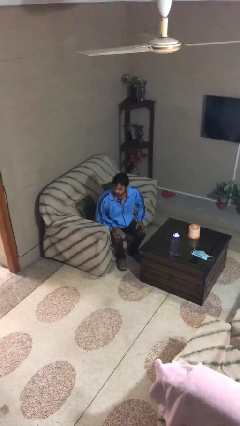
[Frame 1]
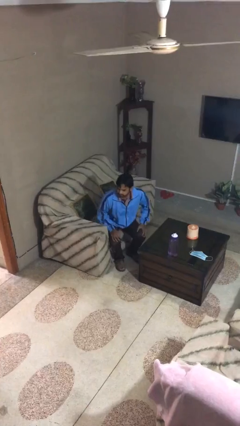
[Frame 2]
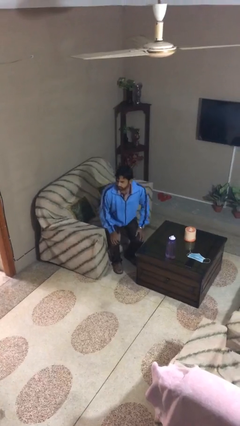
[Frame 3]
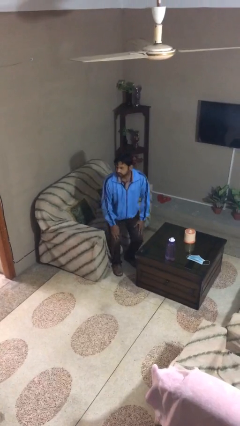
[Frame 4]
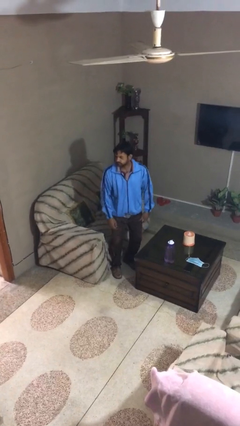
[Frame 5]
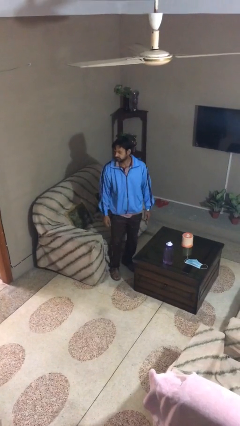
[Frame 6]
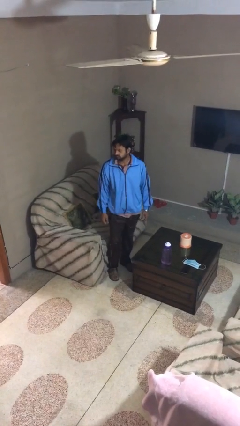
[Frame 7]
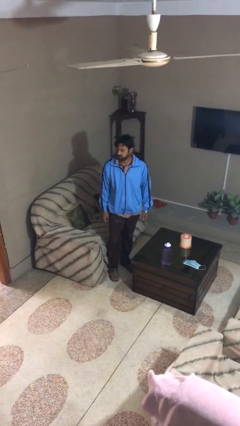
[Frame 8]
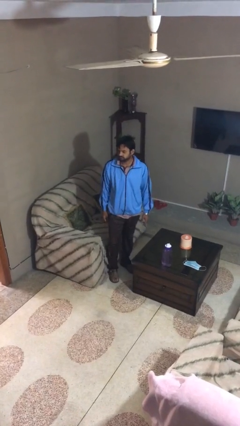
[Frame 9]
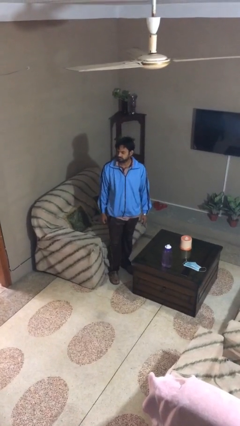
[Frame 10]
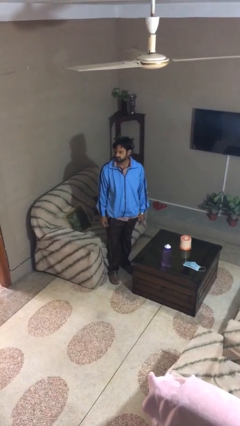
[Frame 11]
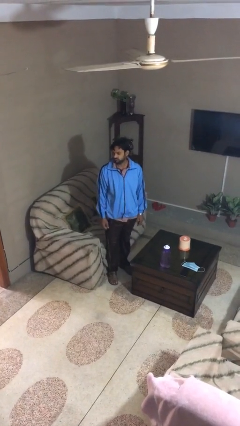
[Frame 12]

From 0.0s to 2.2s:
person stands up

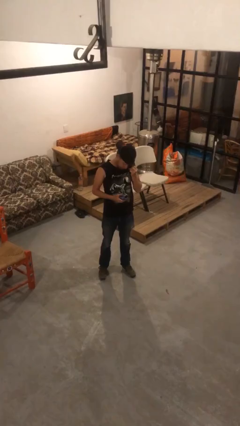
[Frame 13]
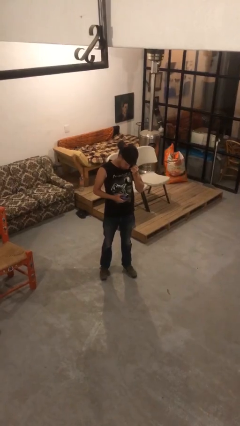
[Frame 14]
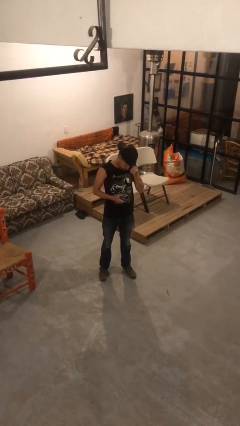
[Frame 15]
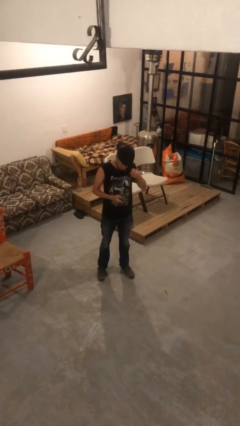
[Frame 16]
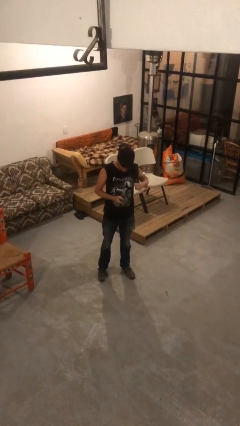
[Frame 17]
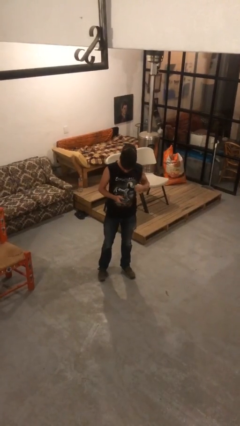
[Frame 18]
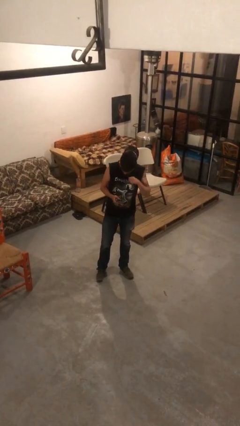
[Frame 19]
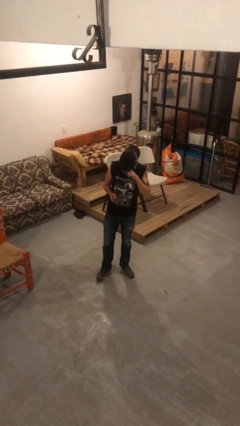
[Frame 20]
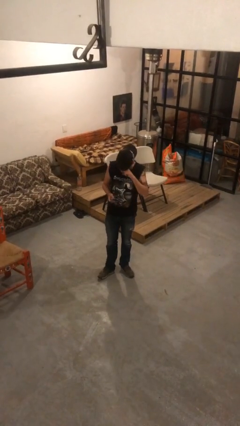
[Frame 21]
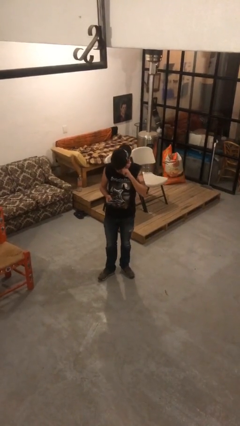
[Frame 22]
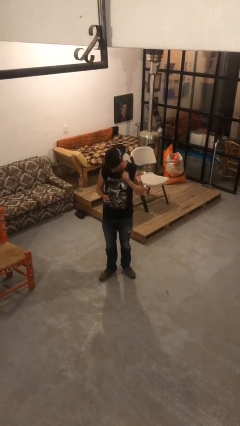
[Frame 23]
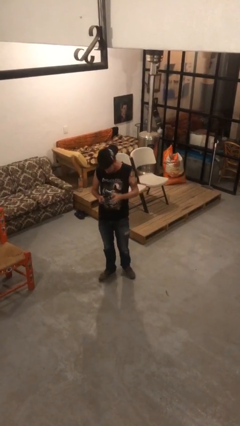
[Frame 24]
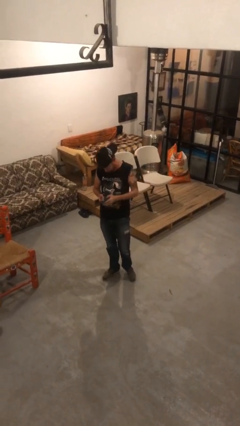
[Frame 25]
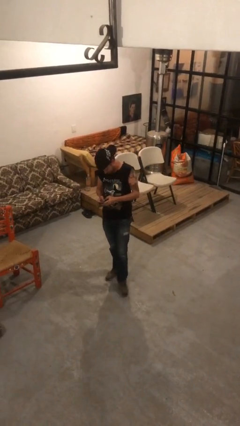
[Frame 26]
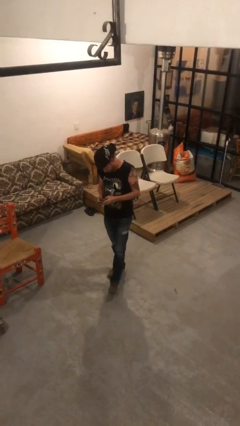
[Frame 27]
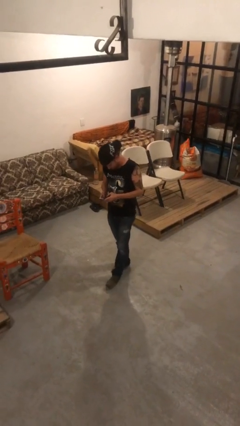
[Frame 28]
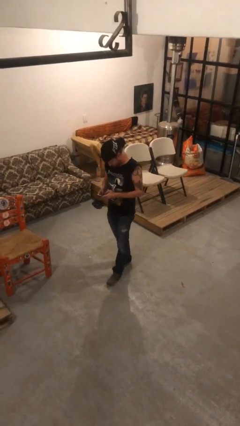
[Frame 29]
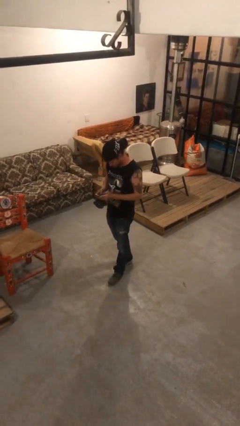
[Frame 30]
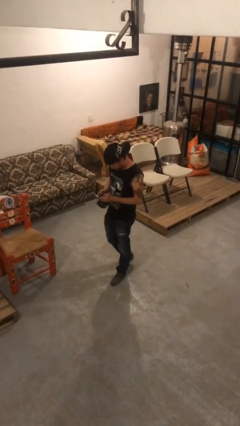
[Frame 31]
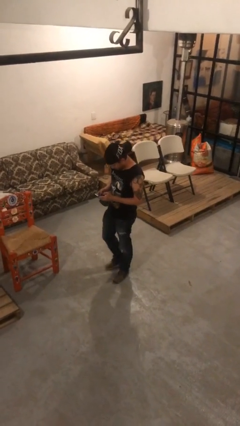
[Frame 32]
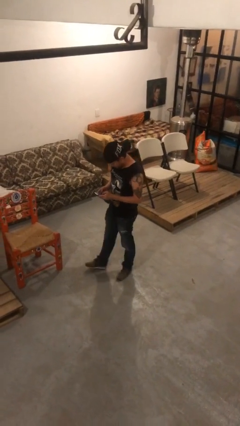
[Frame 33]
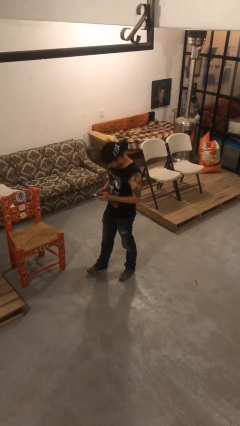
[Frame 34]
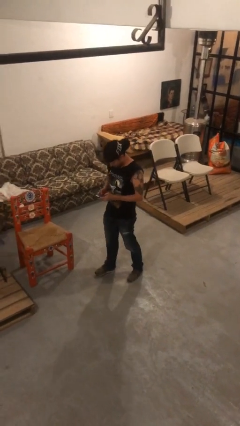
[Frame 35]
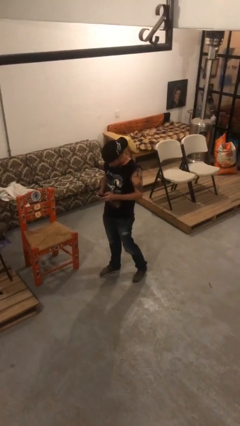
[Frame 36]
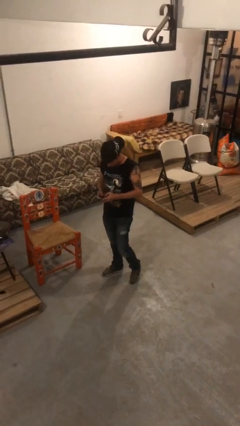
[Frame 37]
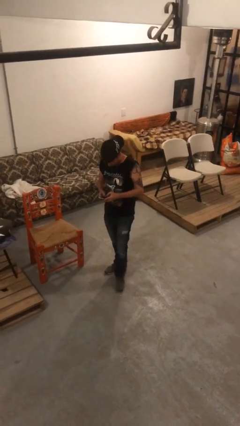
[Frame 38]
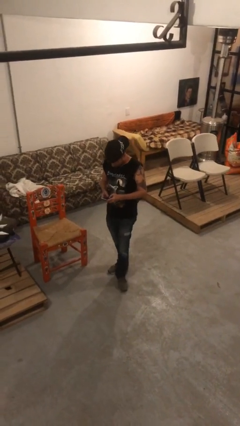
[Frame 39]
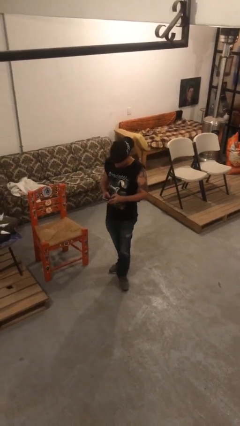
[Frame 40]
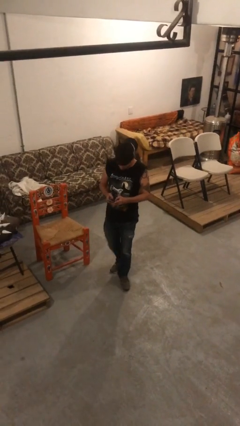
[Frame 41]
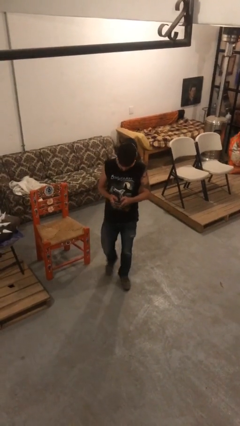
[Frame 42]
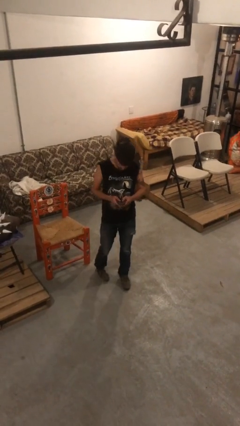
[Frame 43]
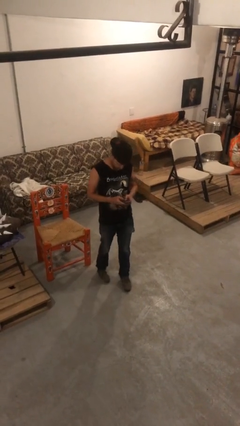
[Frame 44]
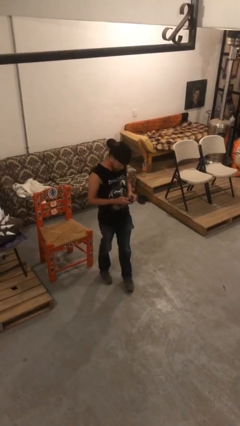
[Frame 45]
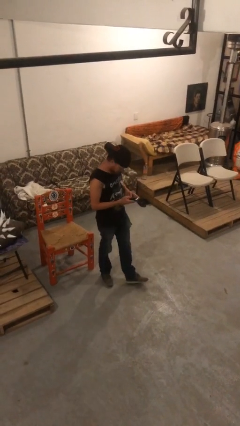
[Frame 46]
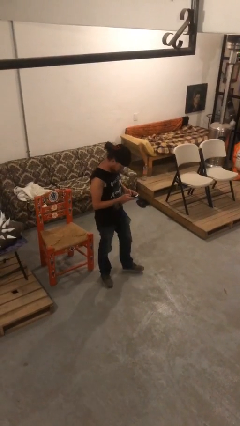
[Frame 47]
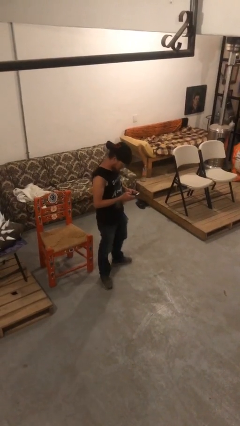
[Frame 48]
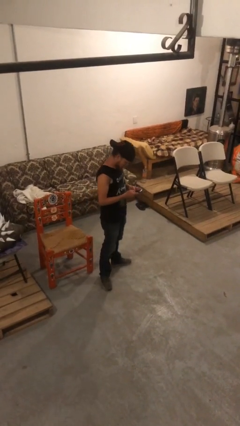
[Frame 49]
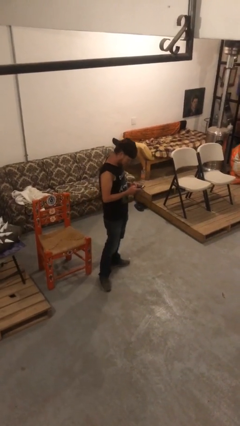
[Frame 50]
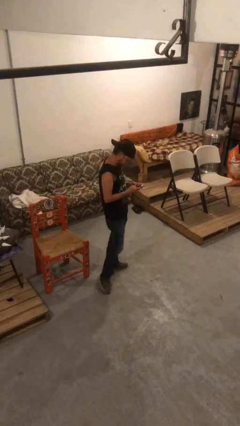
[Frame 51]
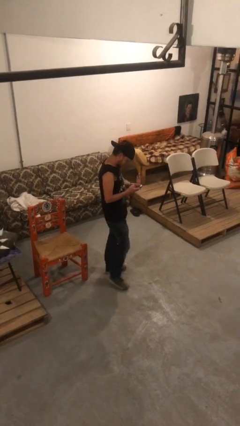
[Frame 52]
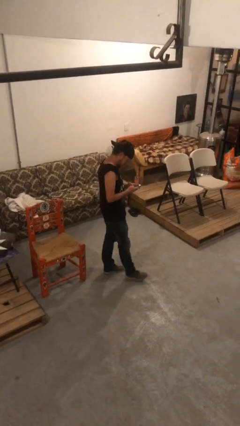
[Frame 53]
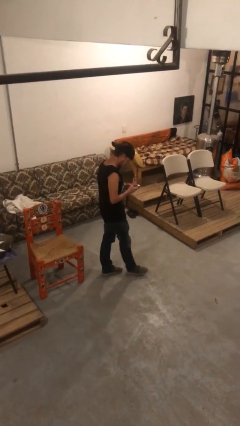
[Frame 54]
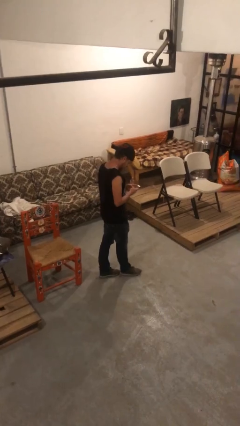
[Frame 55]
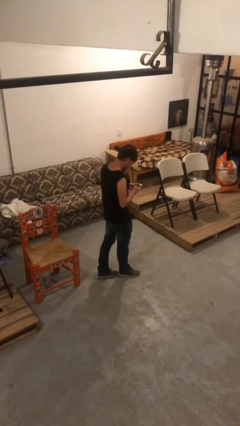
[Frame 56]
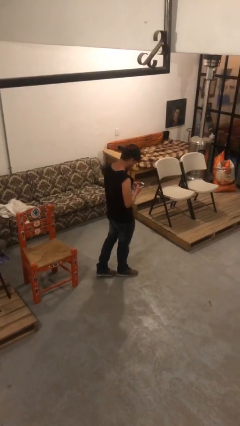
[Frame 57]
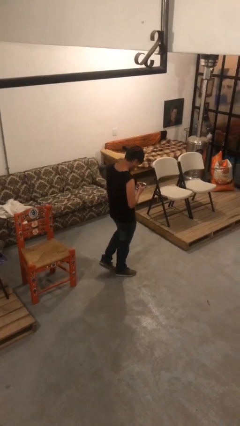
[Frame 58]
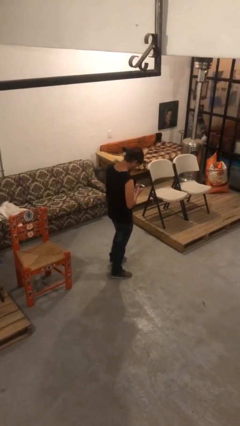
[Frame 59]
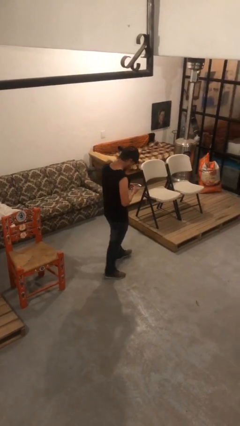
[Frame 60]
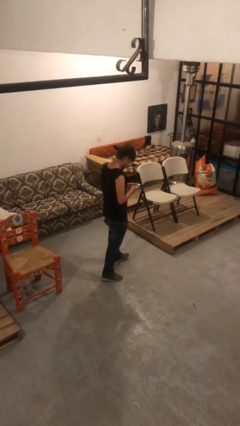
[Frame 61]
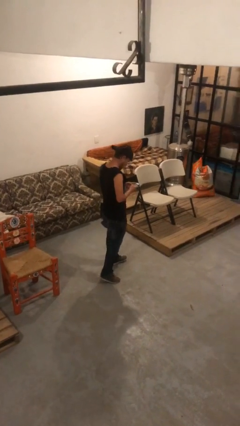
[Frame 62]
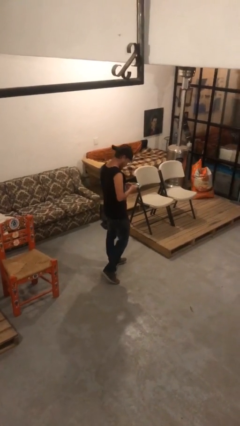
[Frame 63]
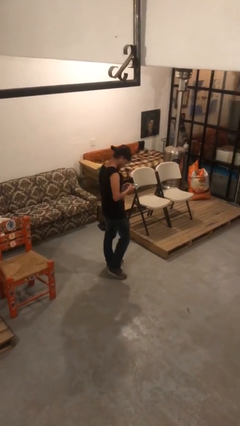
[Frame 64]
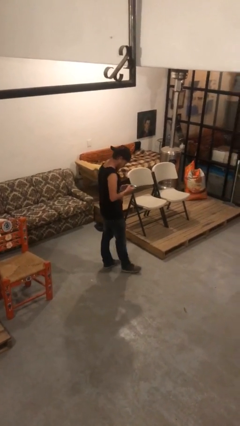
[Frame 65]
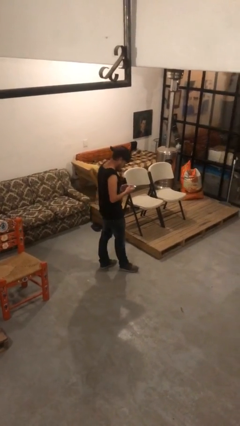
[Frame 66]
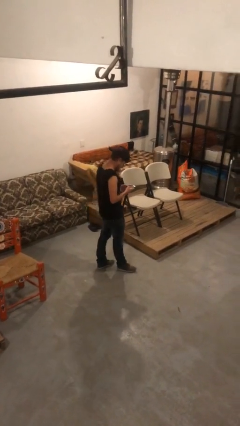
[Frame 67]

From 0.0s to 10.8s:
person texts on phone

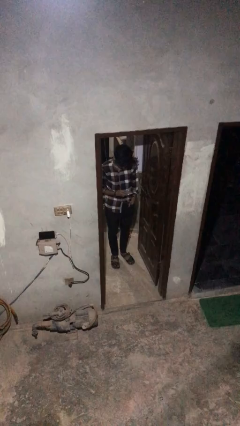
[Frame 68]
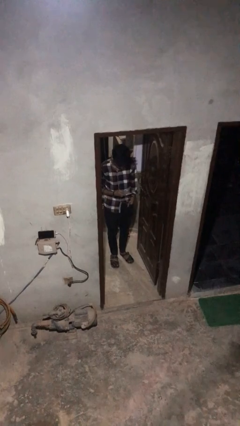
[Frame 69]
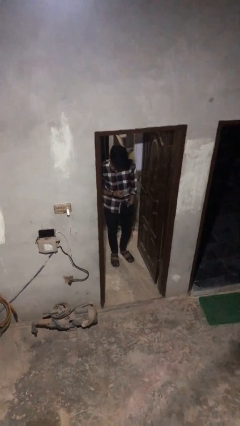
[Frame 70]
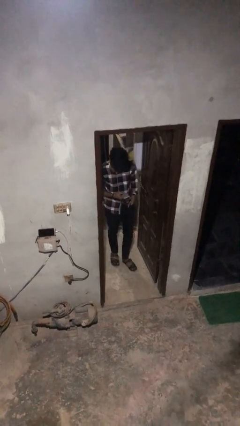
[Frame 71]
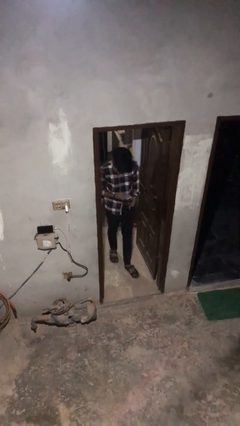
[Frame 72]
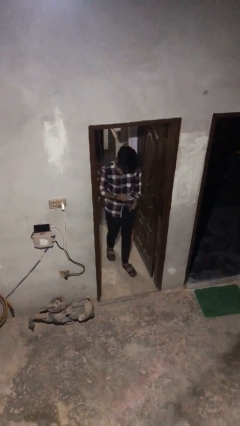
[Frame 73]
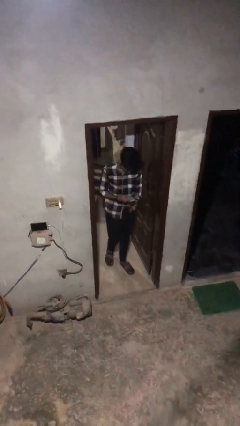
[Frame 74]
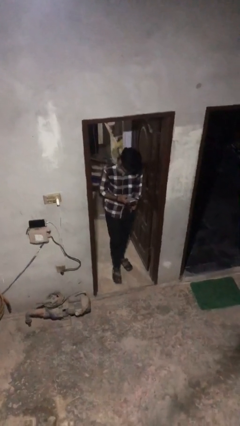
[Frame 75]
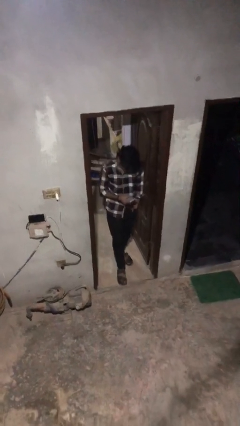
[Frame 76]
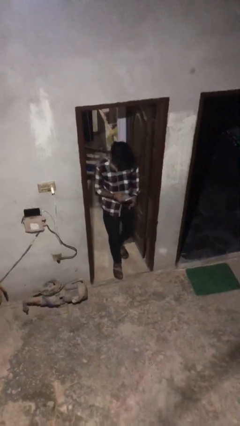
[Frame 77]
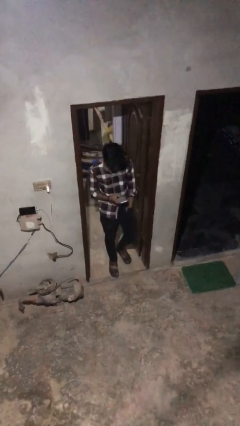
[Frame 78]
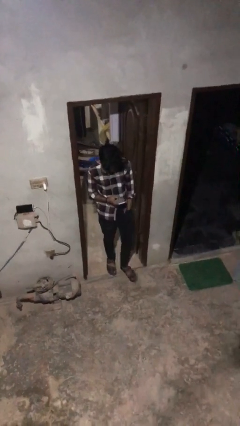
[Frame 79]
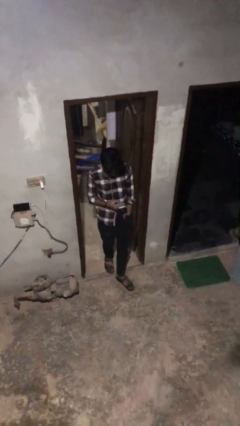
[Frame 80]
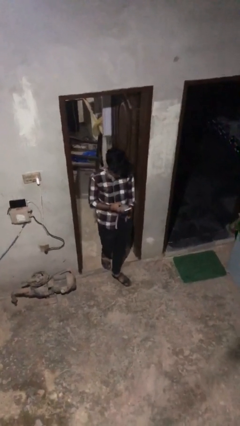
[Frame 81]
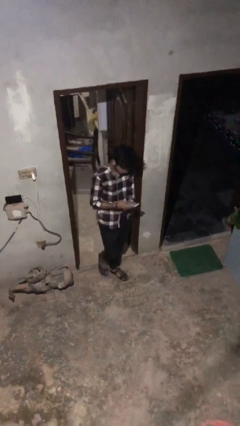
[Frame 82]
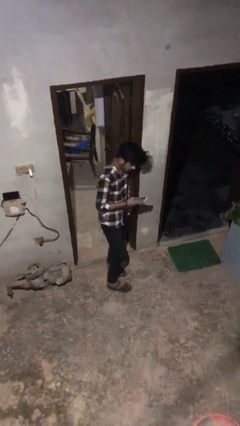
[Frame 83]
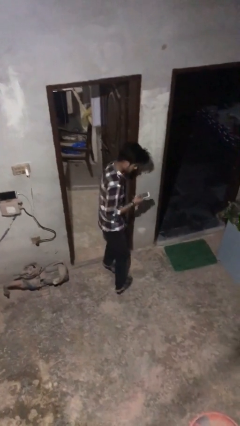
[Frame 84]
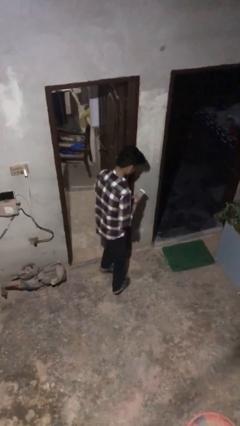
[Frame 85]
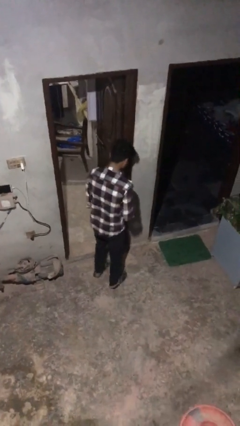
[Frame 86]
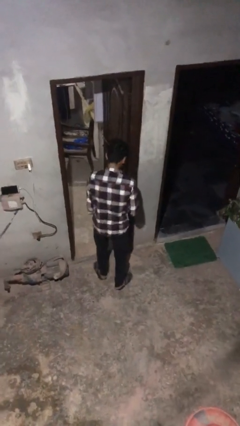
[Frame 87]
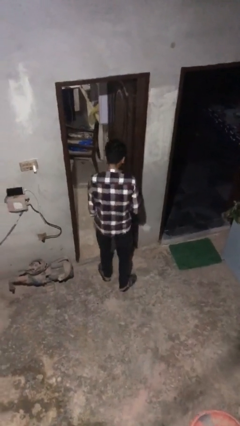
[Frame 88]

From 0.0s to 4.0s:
person enters scene through structure

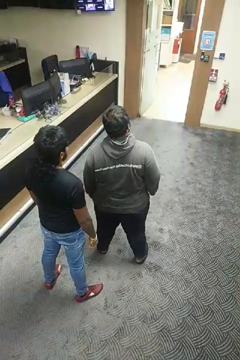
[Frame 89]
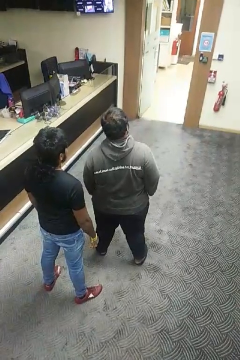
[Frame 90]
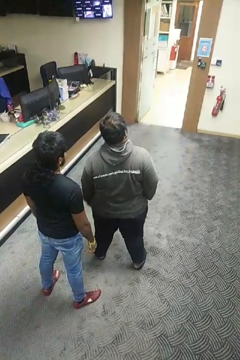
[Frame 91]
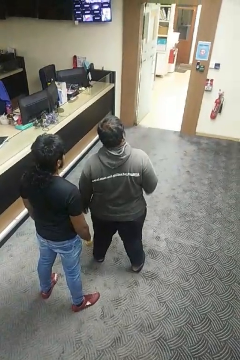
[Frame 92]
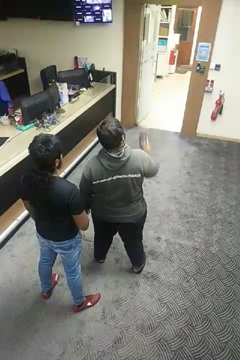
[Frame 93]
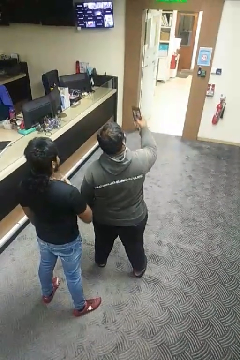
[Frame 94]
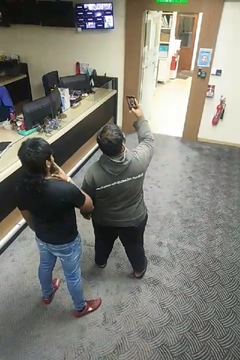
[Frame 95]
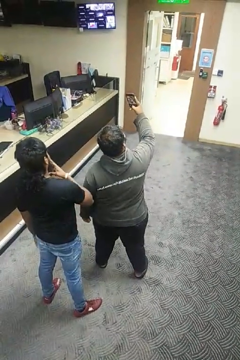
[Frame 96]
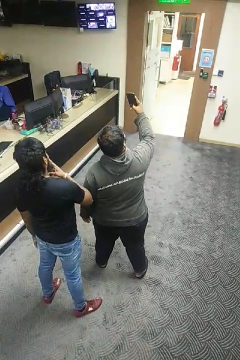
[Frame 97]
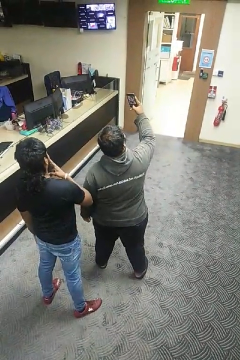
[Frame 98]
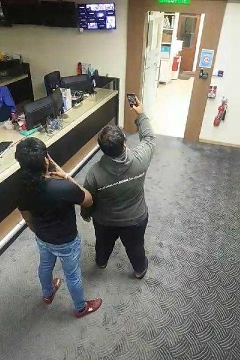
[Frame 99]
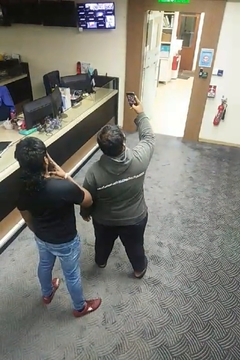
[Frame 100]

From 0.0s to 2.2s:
person takes selfie with person
